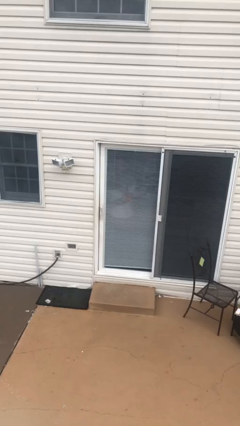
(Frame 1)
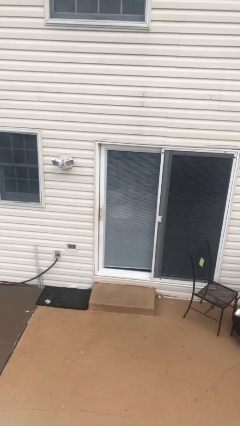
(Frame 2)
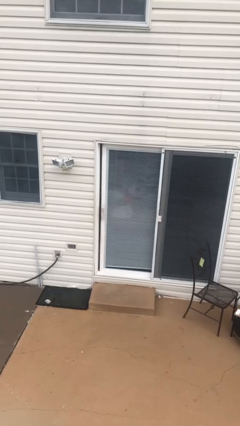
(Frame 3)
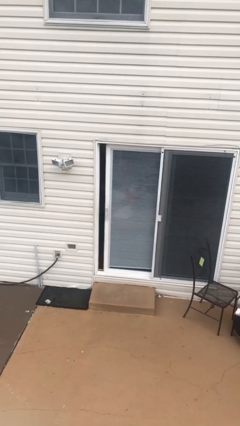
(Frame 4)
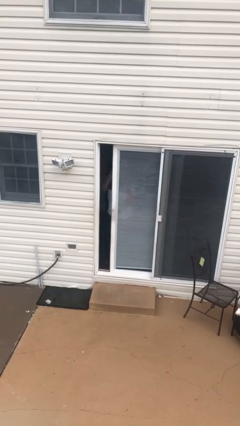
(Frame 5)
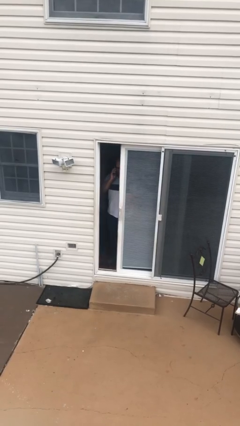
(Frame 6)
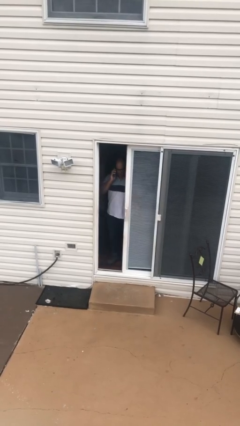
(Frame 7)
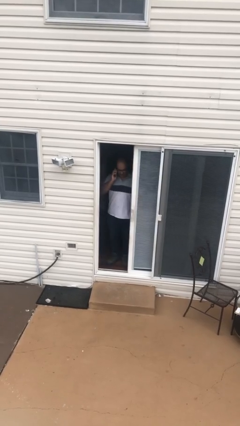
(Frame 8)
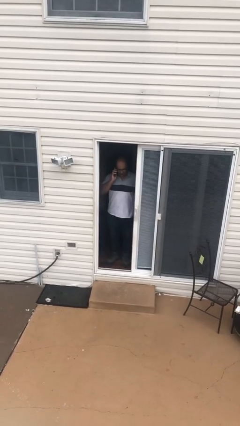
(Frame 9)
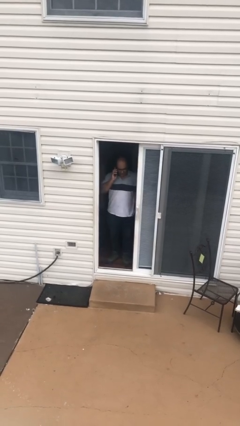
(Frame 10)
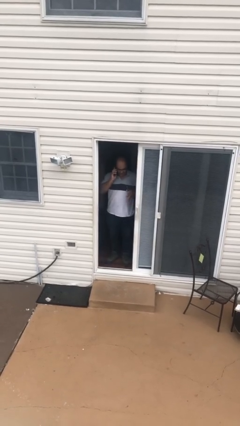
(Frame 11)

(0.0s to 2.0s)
person opens facility door

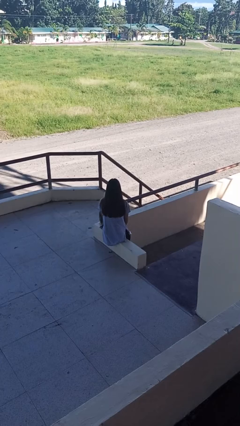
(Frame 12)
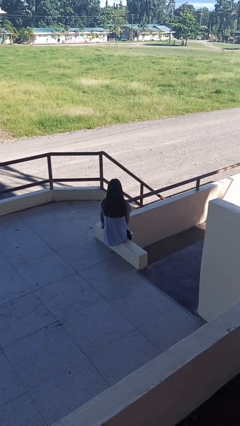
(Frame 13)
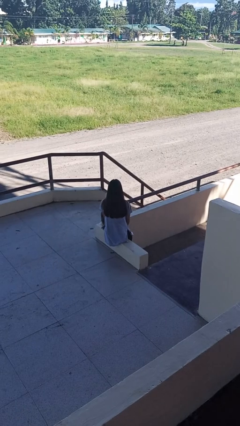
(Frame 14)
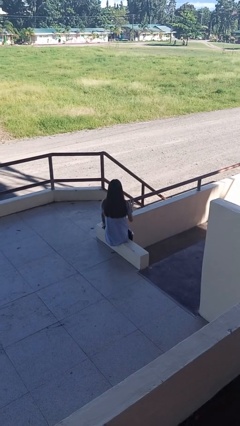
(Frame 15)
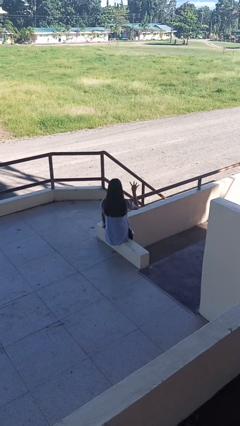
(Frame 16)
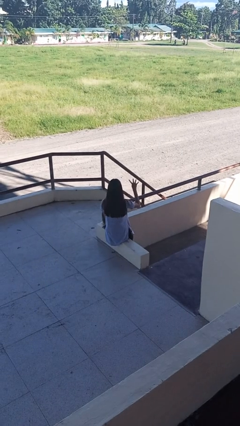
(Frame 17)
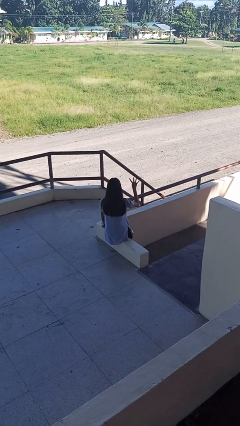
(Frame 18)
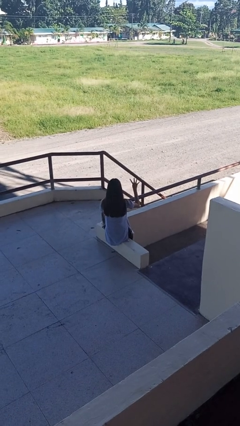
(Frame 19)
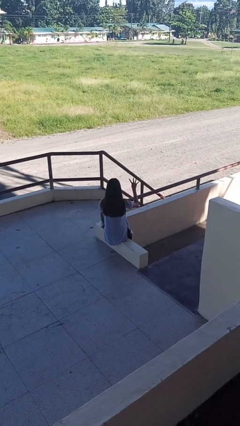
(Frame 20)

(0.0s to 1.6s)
person gestures number four

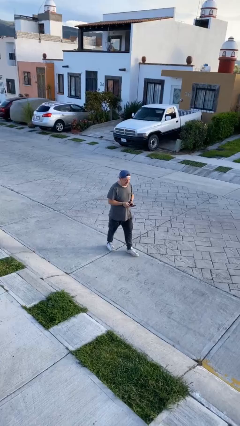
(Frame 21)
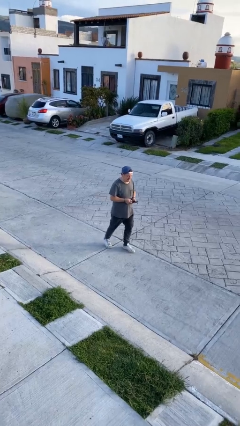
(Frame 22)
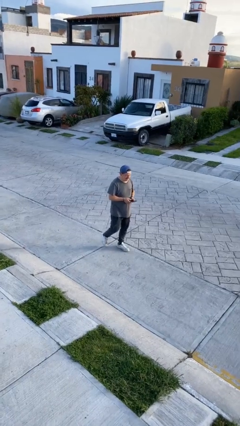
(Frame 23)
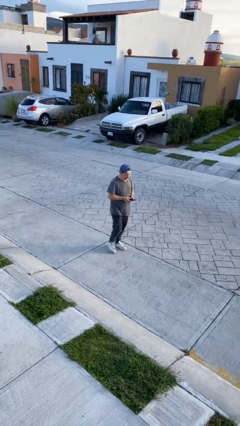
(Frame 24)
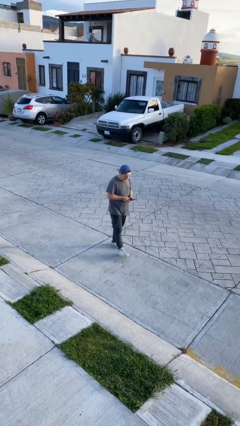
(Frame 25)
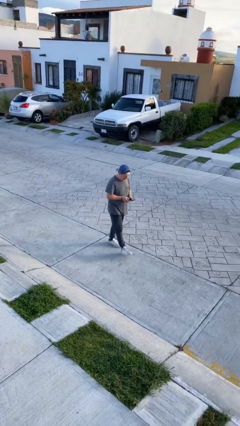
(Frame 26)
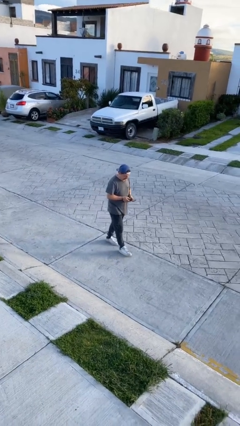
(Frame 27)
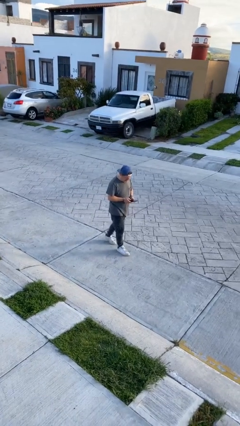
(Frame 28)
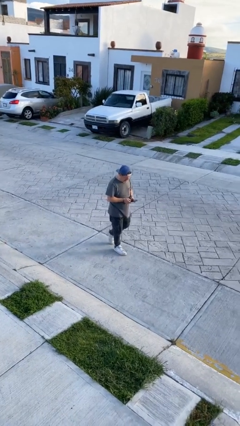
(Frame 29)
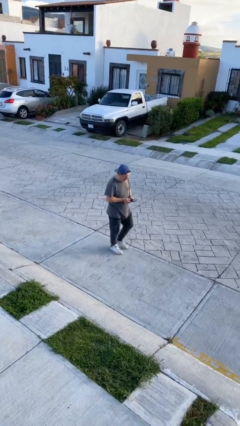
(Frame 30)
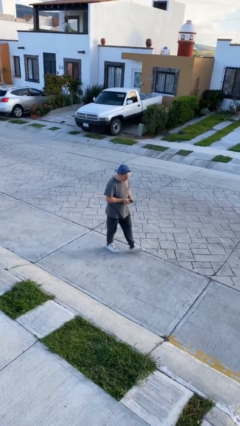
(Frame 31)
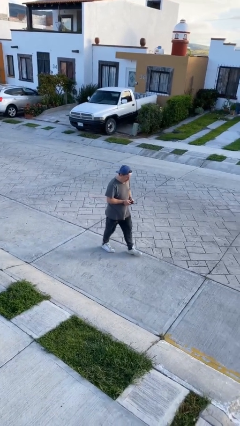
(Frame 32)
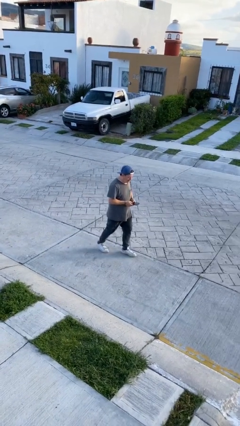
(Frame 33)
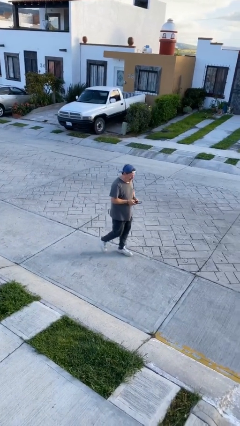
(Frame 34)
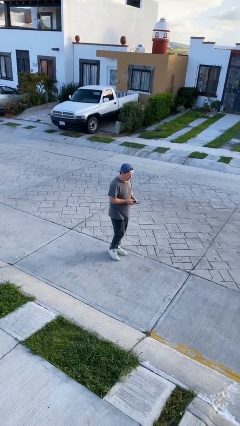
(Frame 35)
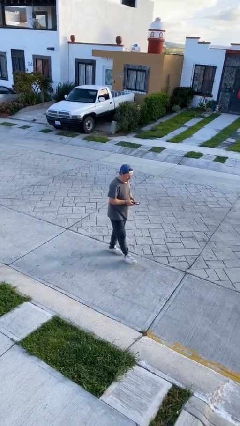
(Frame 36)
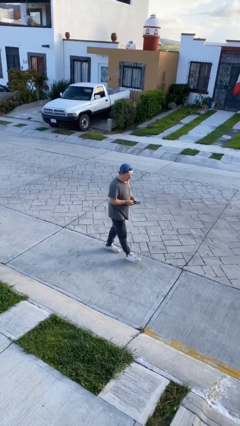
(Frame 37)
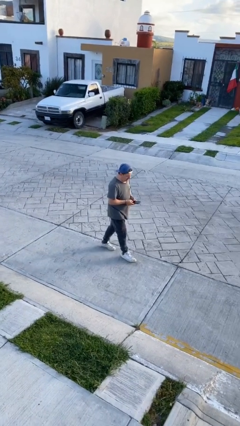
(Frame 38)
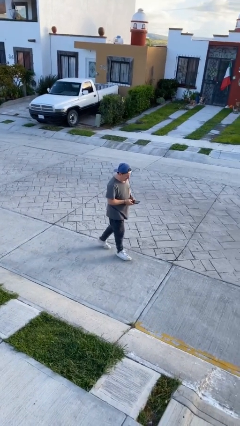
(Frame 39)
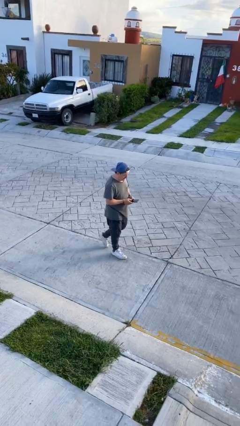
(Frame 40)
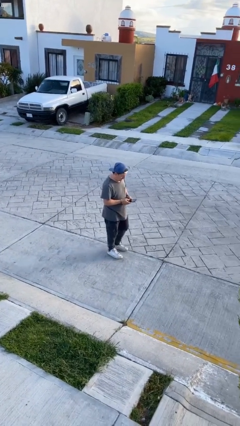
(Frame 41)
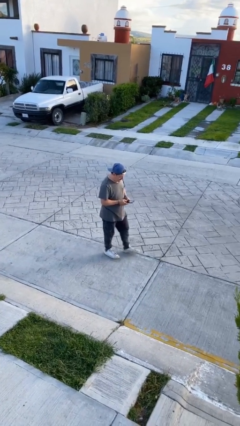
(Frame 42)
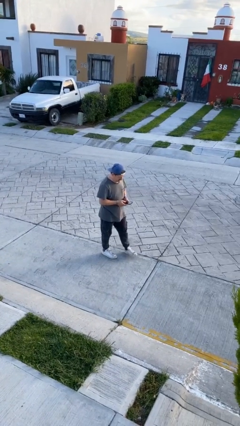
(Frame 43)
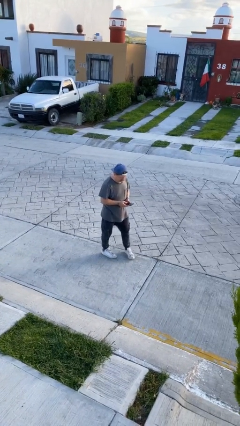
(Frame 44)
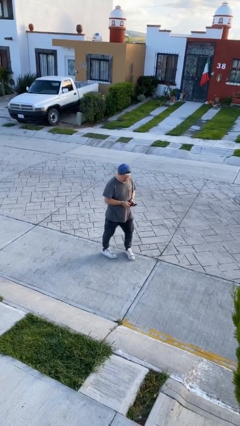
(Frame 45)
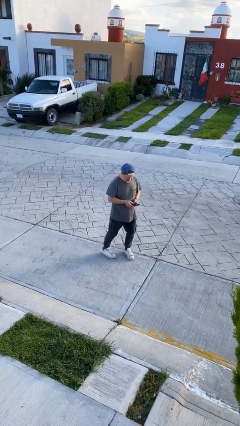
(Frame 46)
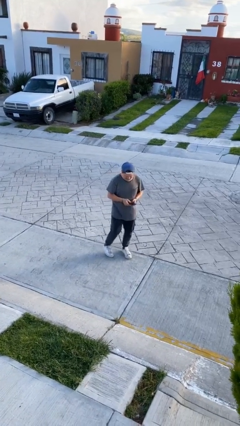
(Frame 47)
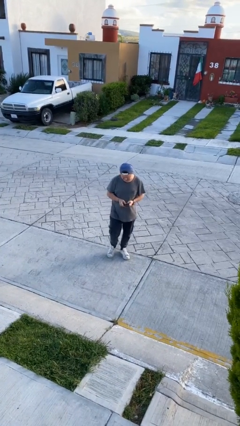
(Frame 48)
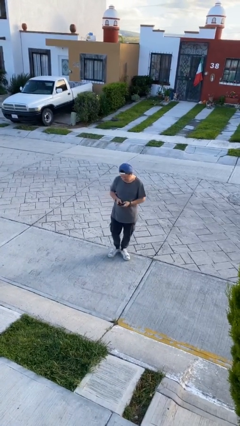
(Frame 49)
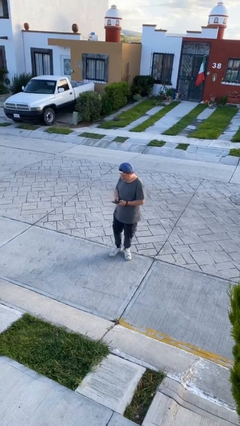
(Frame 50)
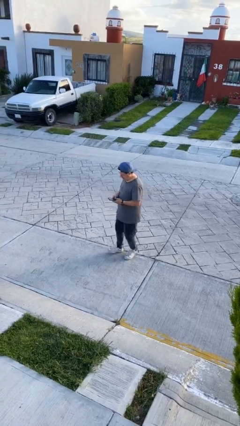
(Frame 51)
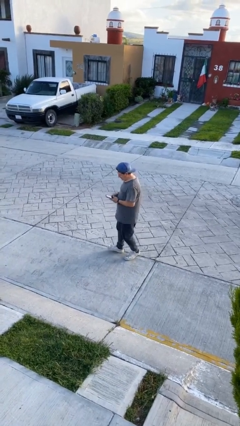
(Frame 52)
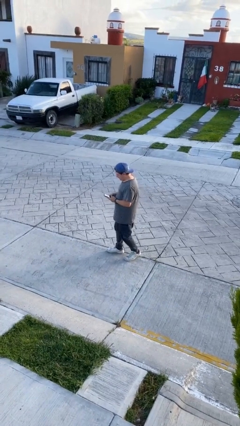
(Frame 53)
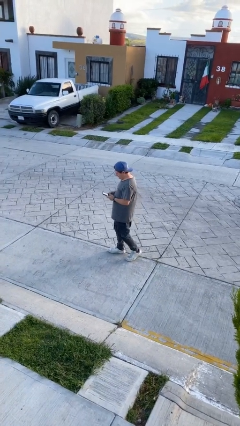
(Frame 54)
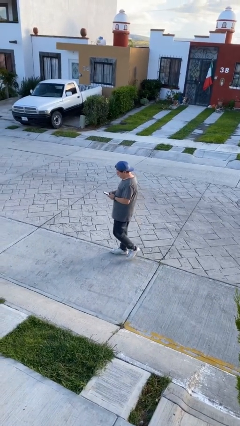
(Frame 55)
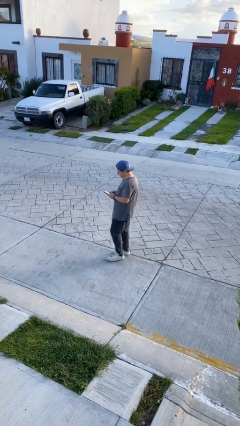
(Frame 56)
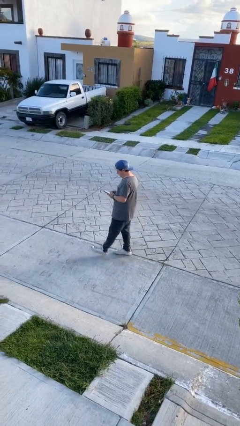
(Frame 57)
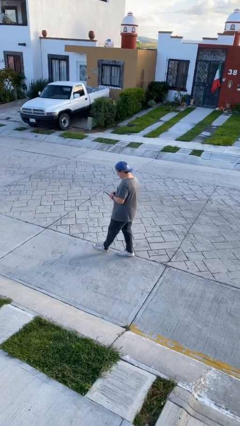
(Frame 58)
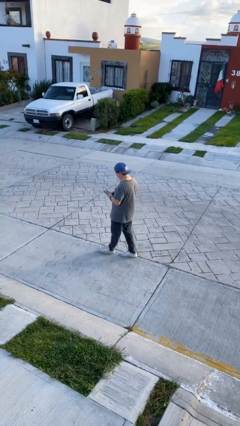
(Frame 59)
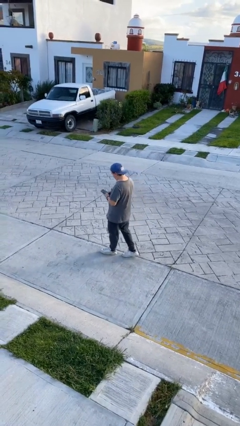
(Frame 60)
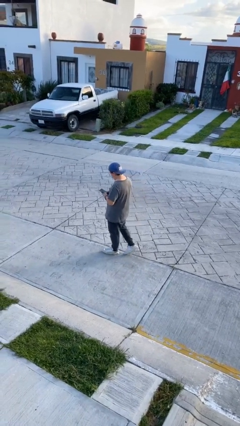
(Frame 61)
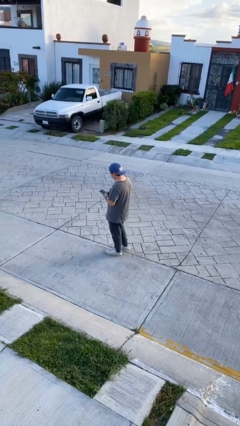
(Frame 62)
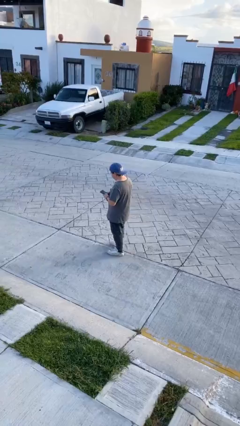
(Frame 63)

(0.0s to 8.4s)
person texts on phone

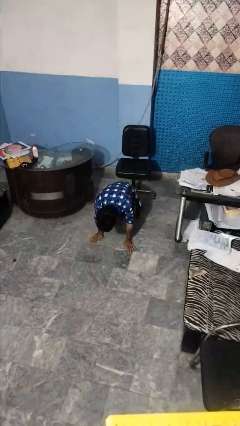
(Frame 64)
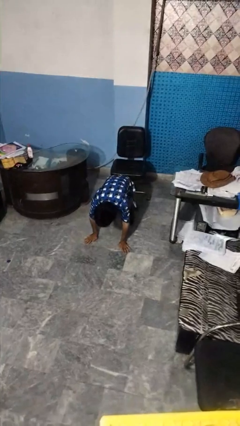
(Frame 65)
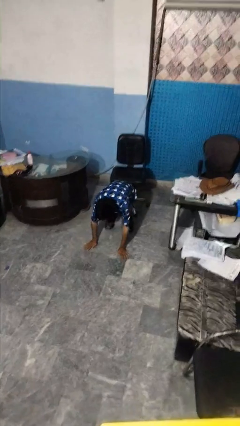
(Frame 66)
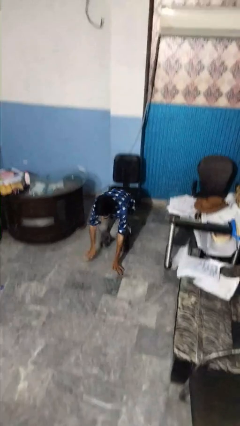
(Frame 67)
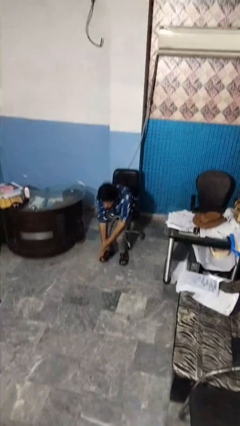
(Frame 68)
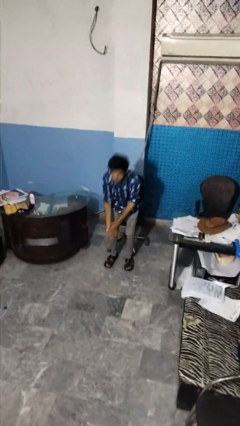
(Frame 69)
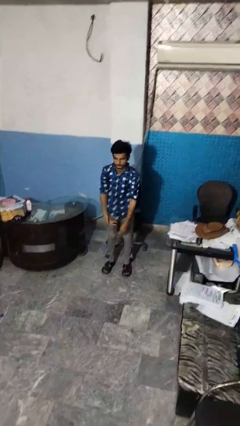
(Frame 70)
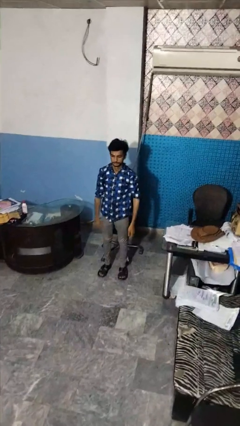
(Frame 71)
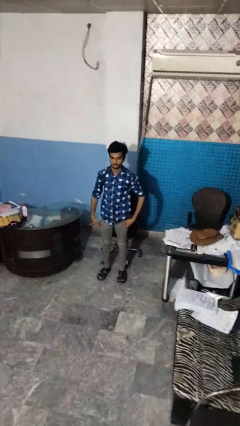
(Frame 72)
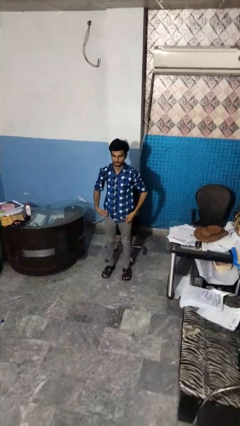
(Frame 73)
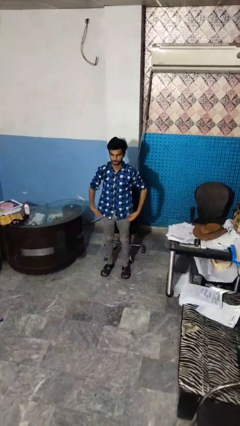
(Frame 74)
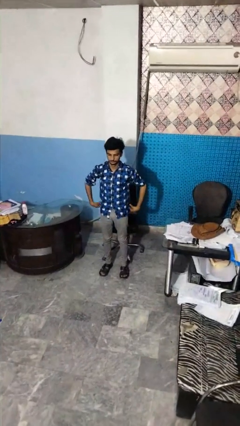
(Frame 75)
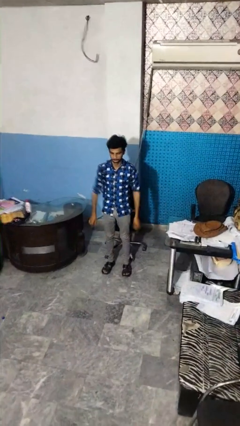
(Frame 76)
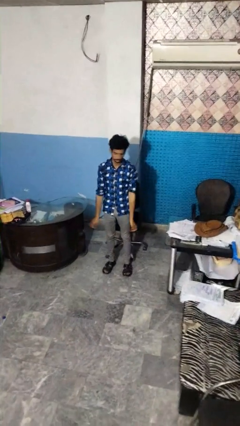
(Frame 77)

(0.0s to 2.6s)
person stands up from floor

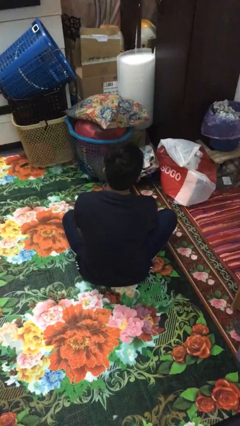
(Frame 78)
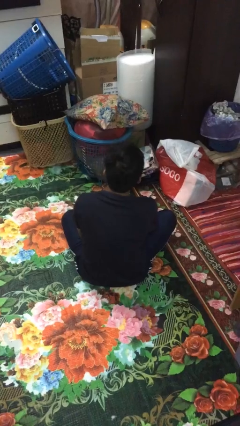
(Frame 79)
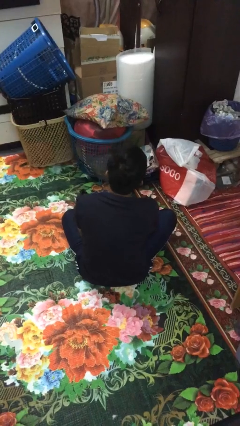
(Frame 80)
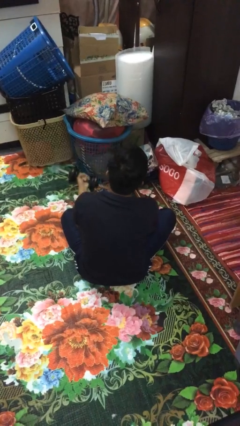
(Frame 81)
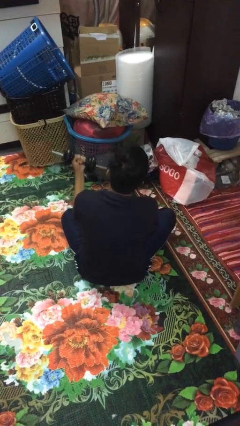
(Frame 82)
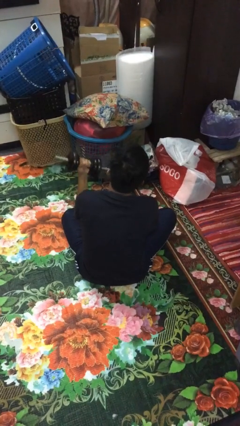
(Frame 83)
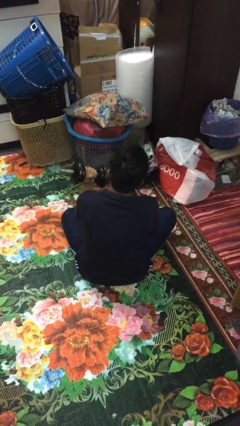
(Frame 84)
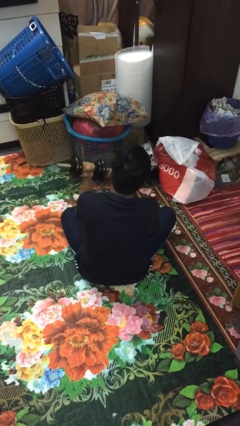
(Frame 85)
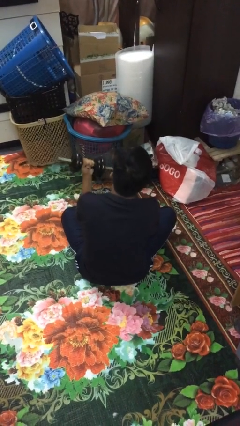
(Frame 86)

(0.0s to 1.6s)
person lifts dumbbells

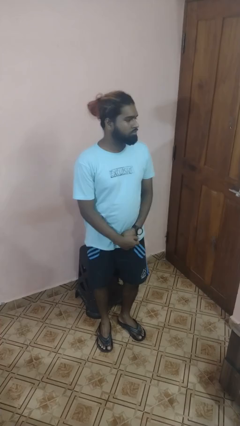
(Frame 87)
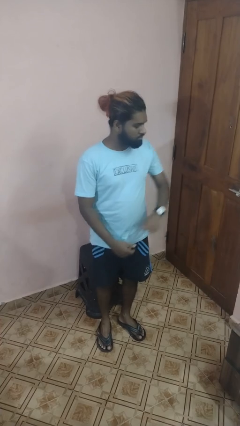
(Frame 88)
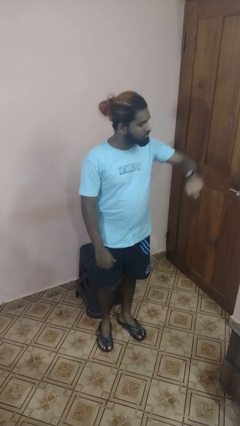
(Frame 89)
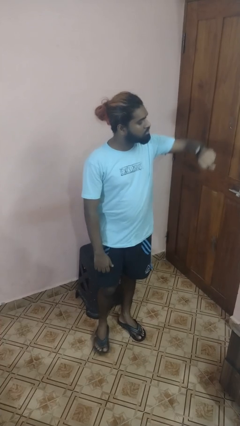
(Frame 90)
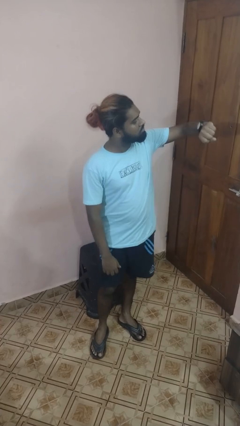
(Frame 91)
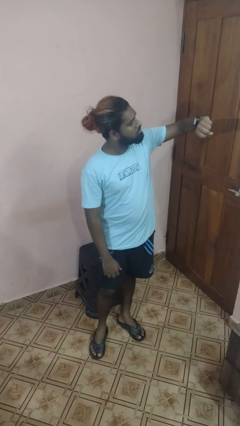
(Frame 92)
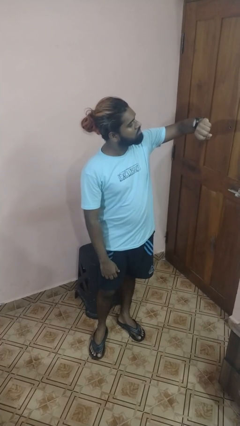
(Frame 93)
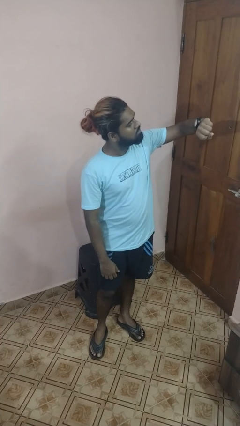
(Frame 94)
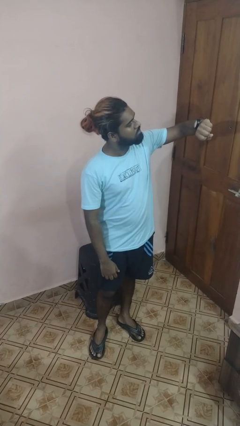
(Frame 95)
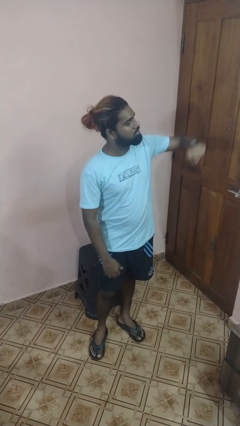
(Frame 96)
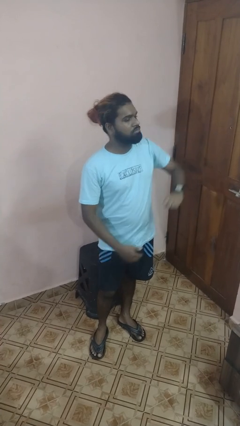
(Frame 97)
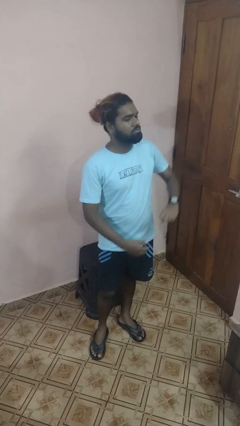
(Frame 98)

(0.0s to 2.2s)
person looks at wristwatch
